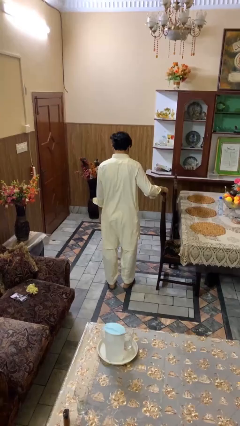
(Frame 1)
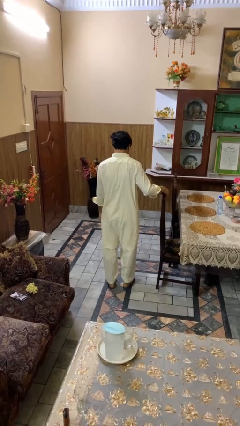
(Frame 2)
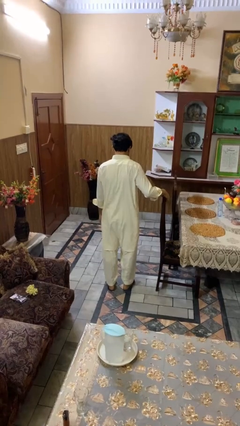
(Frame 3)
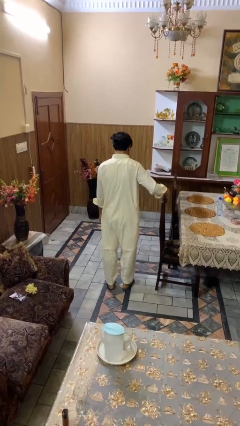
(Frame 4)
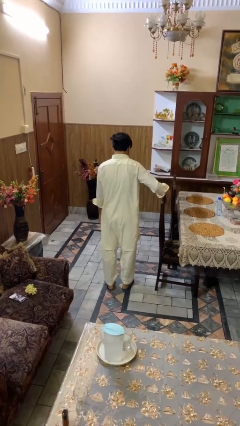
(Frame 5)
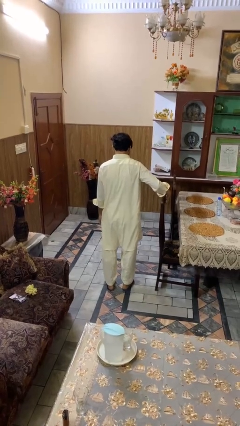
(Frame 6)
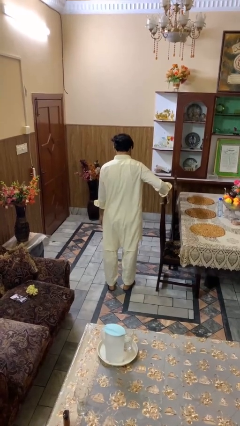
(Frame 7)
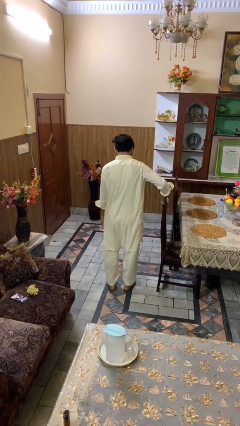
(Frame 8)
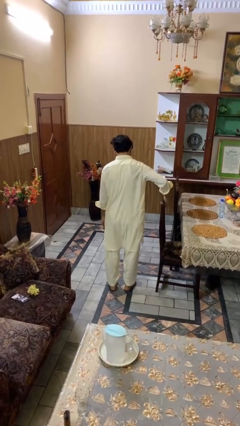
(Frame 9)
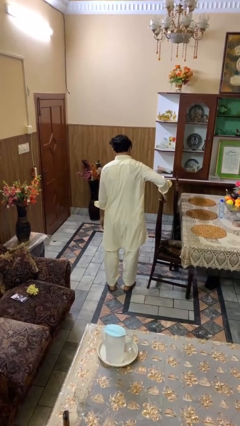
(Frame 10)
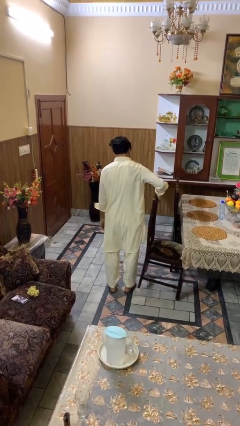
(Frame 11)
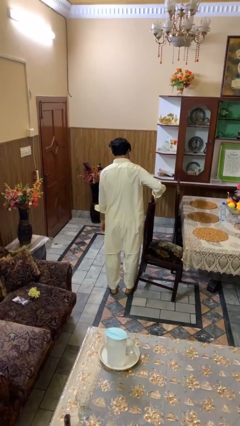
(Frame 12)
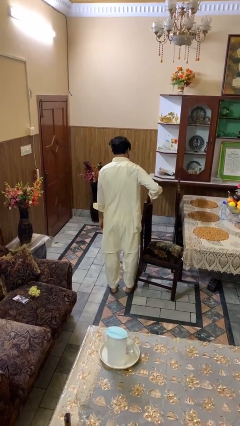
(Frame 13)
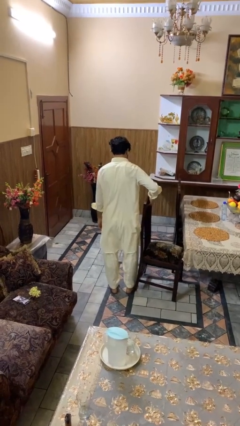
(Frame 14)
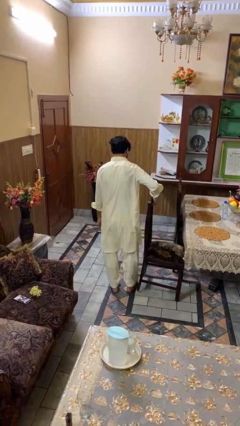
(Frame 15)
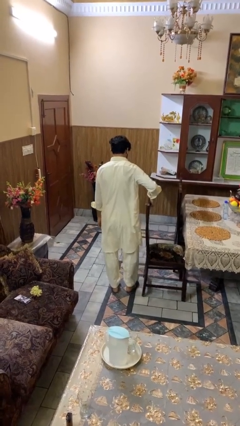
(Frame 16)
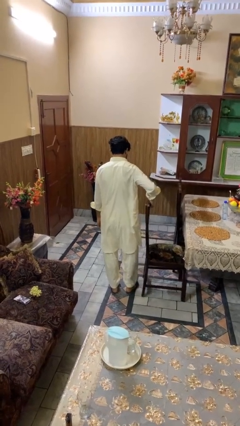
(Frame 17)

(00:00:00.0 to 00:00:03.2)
person pulls out chair

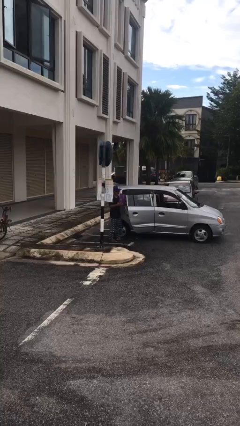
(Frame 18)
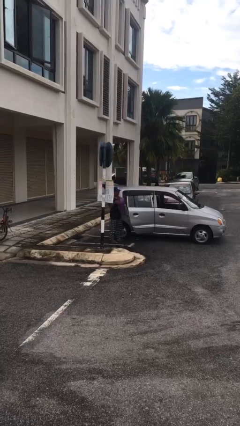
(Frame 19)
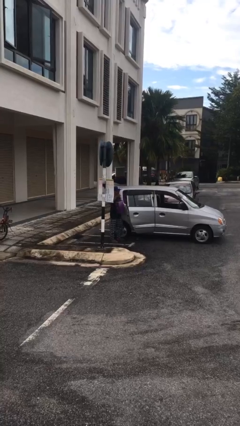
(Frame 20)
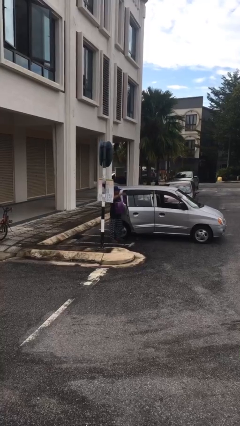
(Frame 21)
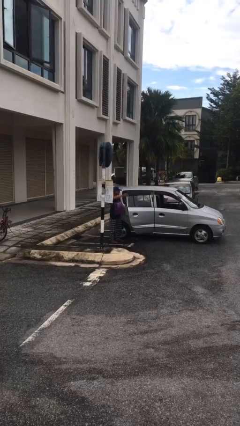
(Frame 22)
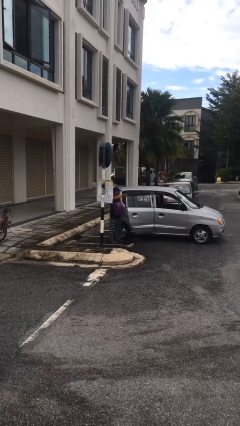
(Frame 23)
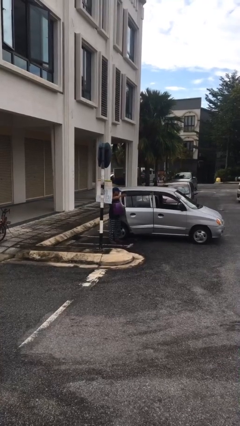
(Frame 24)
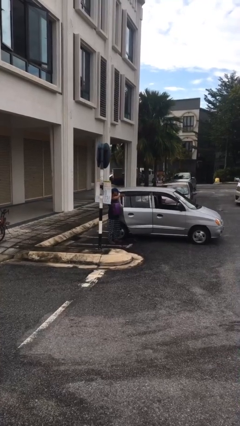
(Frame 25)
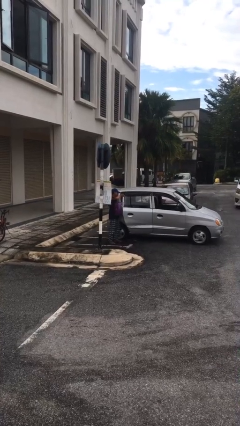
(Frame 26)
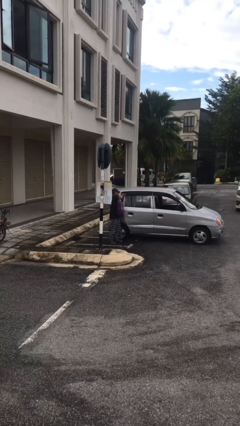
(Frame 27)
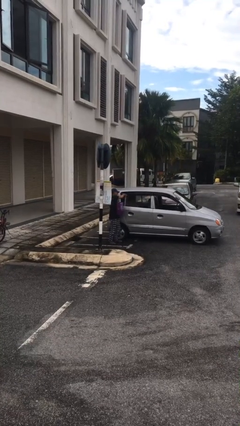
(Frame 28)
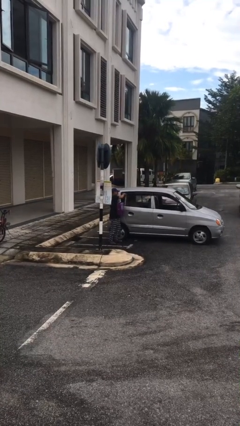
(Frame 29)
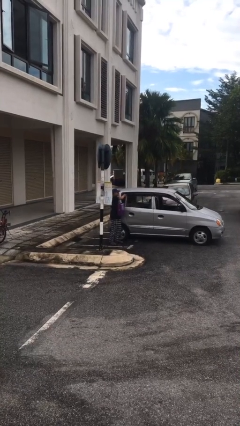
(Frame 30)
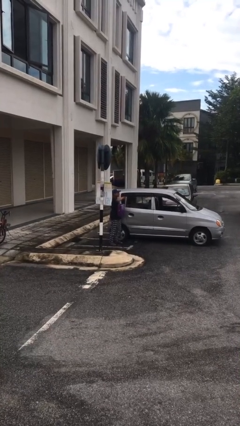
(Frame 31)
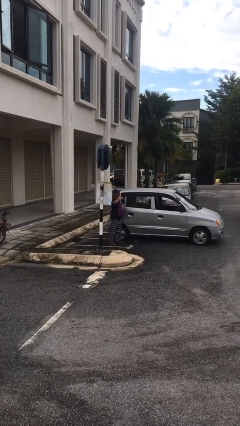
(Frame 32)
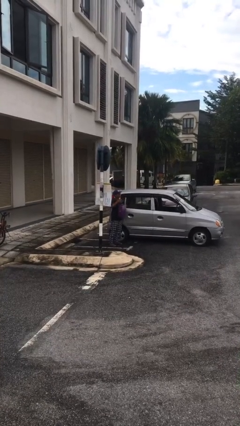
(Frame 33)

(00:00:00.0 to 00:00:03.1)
person closes car door

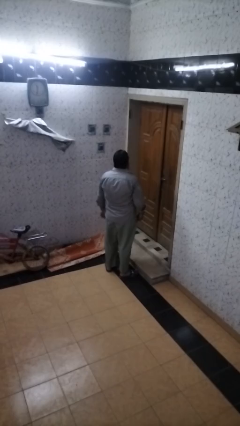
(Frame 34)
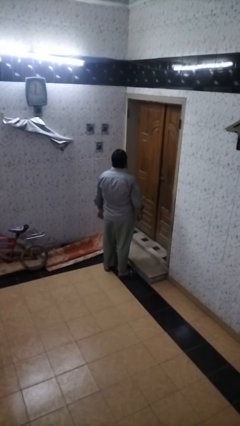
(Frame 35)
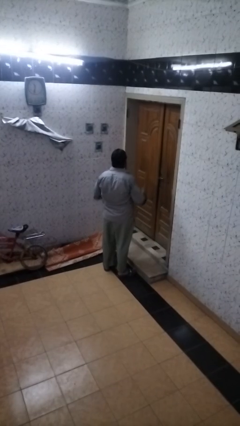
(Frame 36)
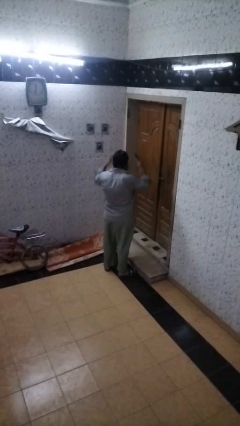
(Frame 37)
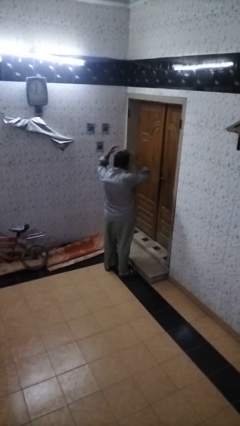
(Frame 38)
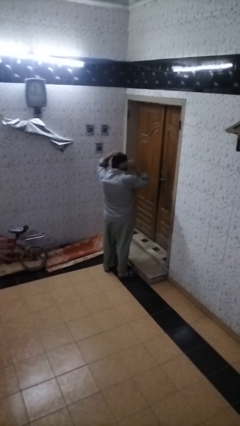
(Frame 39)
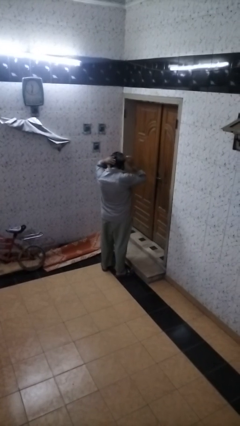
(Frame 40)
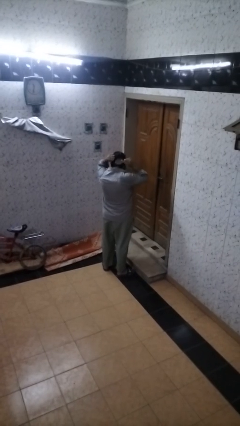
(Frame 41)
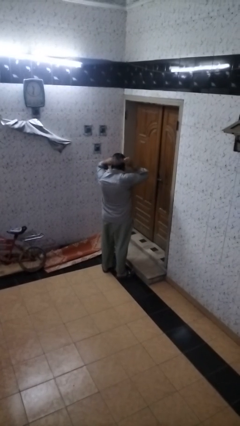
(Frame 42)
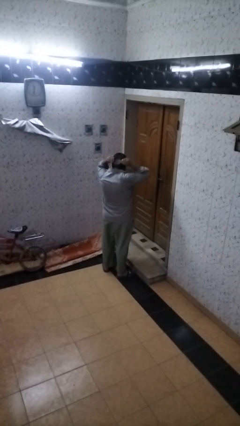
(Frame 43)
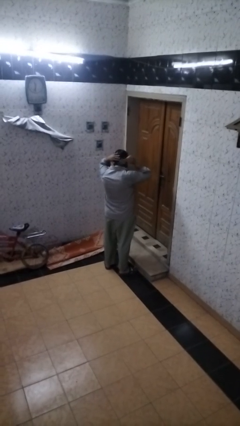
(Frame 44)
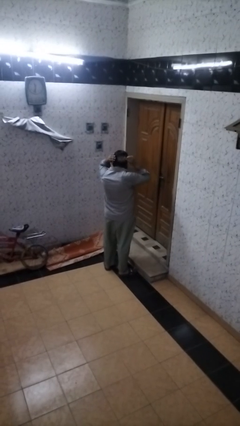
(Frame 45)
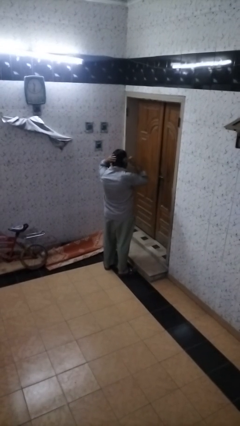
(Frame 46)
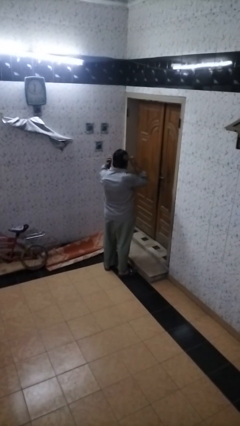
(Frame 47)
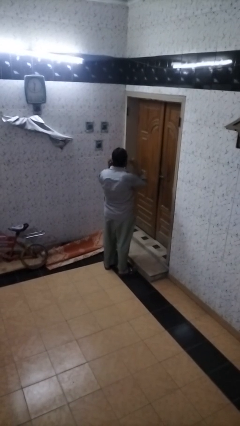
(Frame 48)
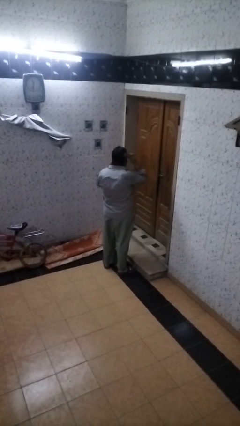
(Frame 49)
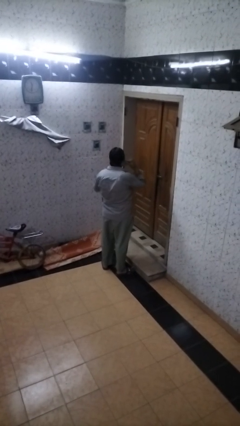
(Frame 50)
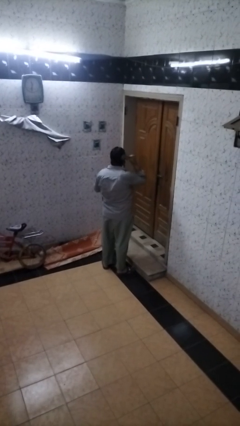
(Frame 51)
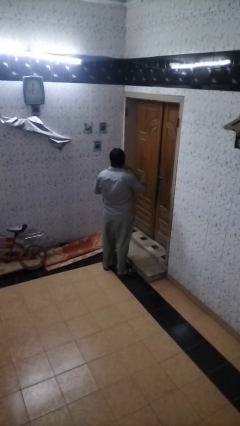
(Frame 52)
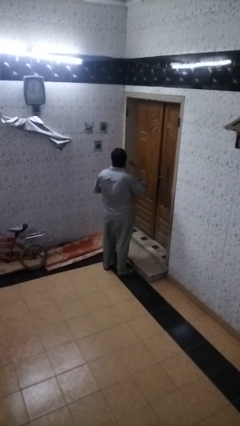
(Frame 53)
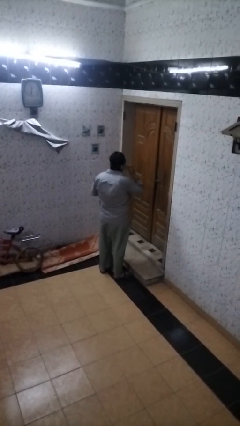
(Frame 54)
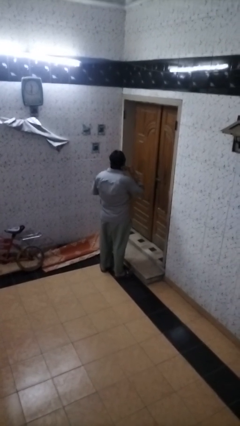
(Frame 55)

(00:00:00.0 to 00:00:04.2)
person brushes hair

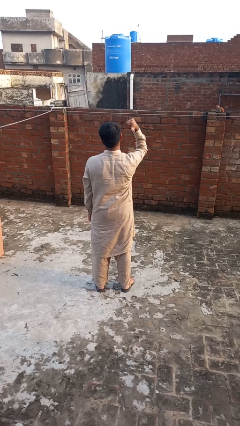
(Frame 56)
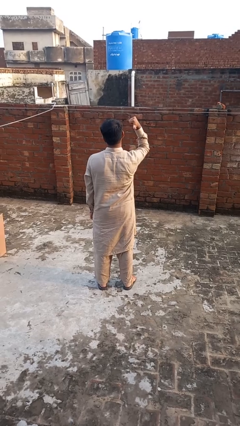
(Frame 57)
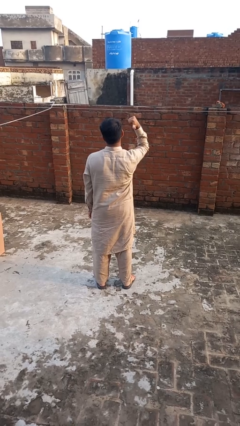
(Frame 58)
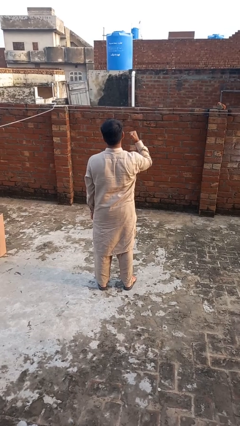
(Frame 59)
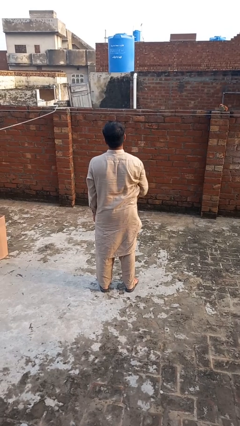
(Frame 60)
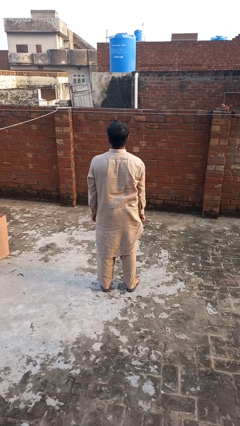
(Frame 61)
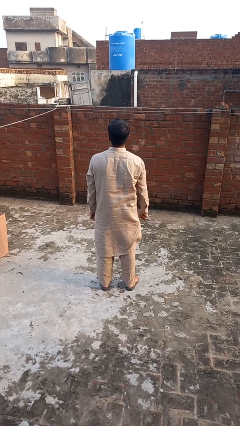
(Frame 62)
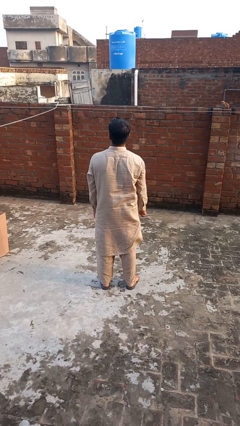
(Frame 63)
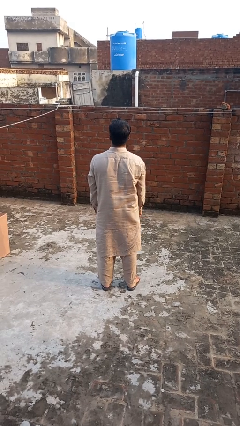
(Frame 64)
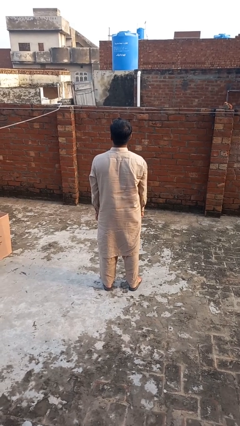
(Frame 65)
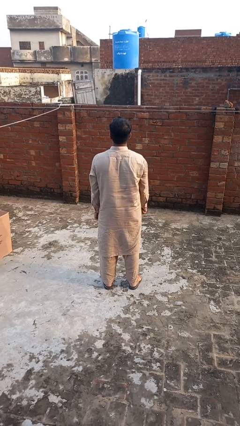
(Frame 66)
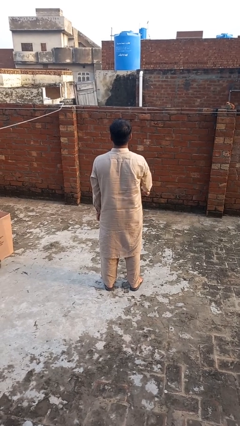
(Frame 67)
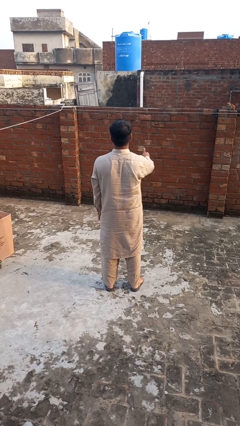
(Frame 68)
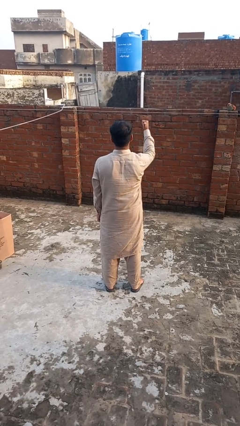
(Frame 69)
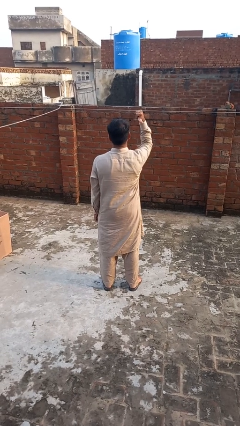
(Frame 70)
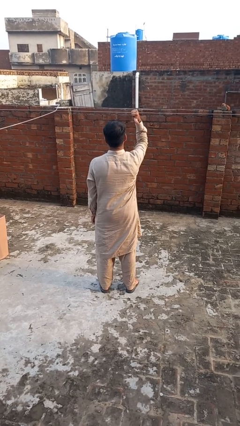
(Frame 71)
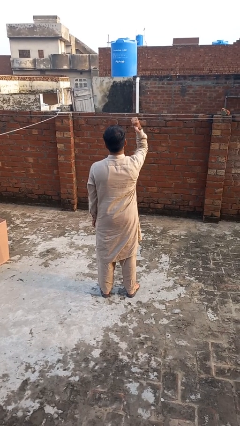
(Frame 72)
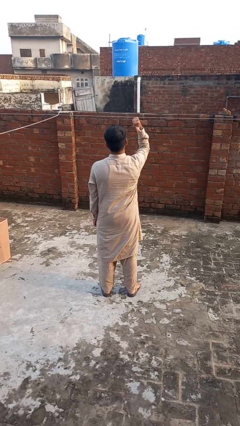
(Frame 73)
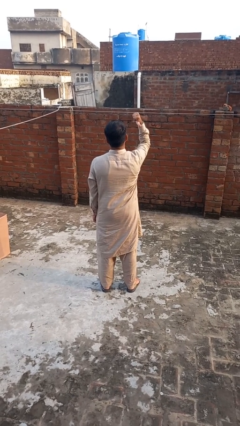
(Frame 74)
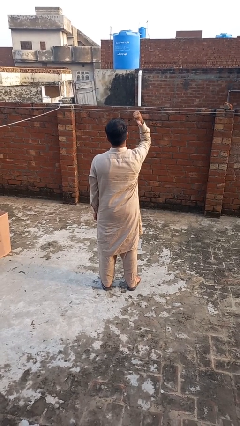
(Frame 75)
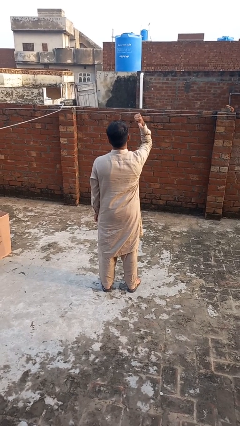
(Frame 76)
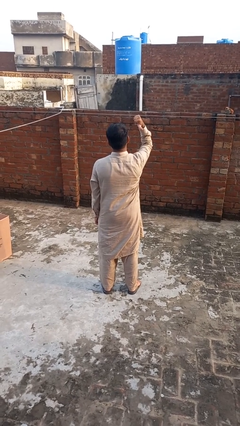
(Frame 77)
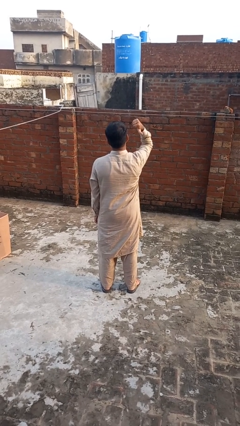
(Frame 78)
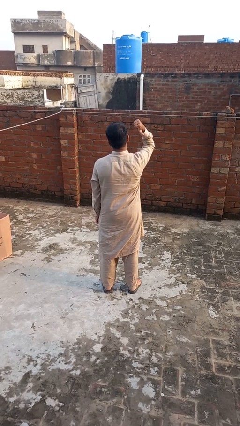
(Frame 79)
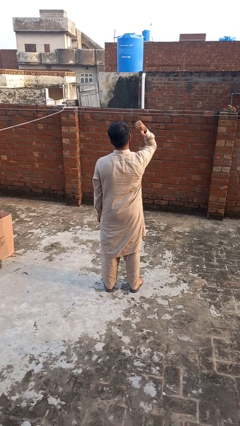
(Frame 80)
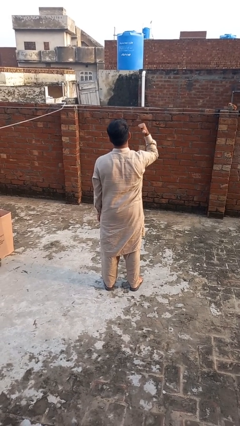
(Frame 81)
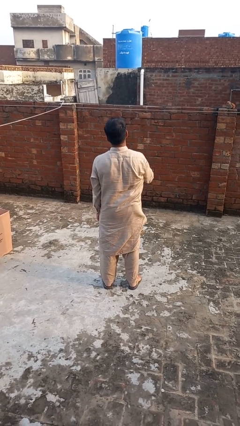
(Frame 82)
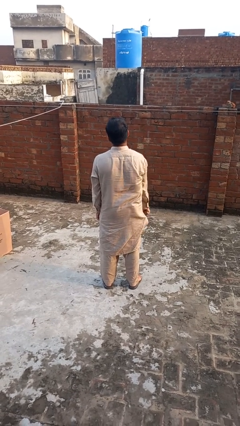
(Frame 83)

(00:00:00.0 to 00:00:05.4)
person gestures behind me

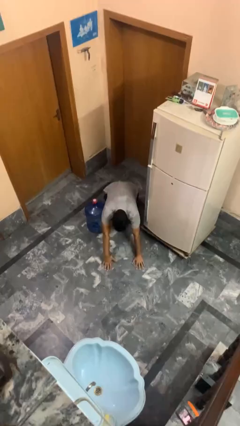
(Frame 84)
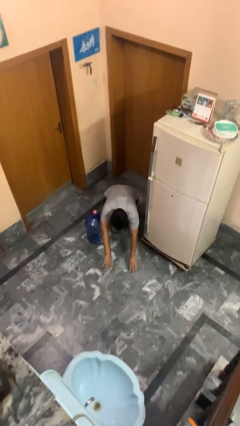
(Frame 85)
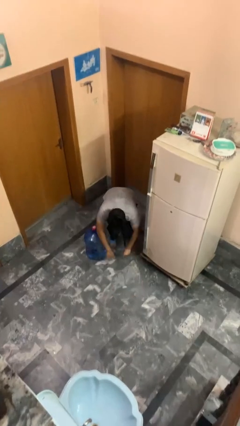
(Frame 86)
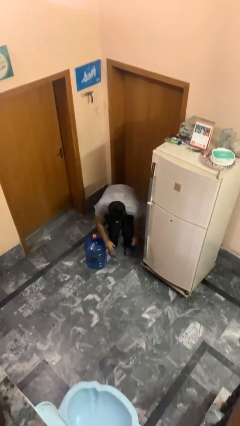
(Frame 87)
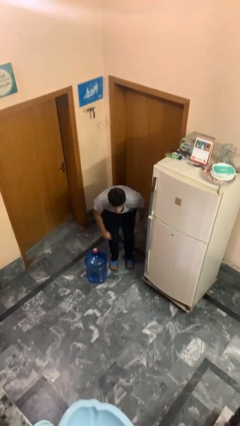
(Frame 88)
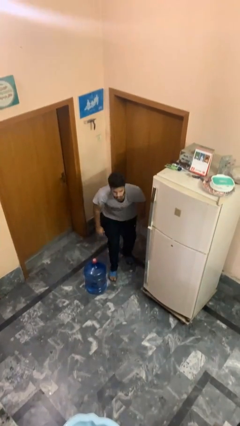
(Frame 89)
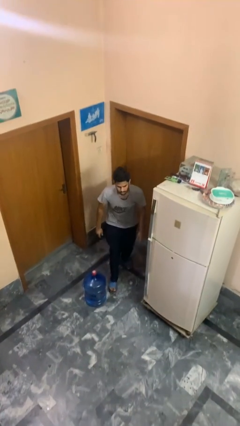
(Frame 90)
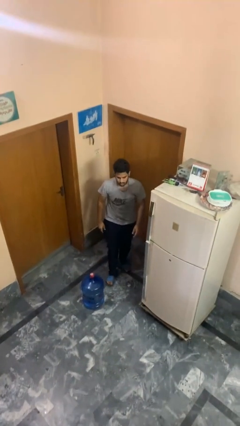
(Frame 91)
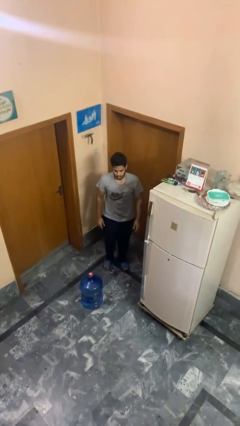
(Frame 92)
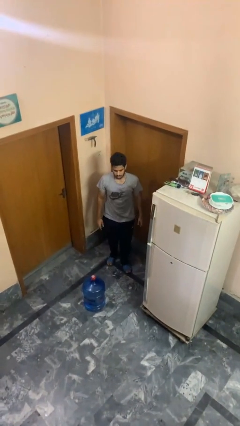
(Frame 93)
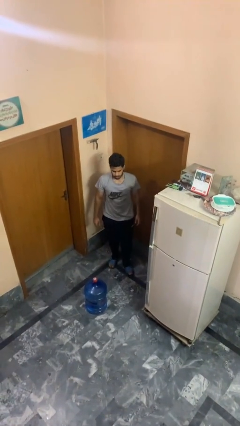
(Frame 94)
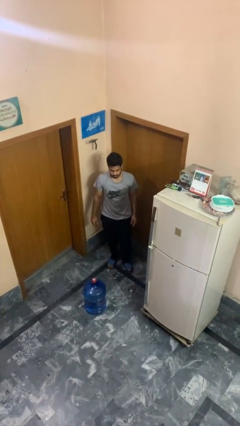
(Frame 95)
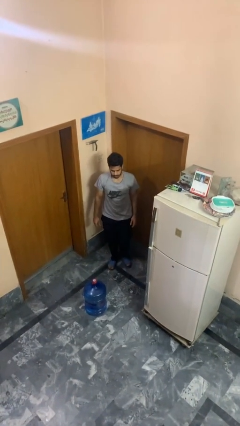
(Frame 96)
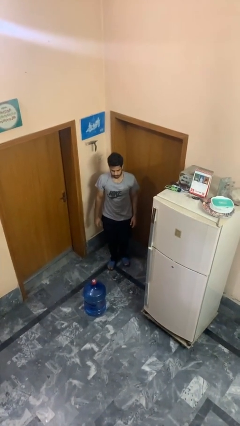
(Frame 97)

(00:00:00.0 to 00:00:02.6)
person stands up from floor
